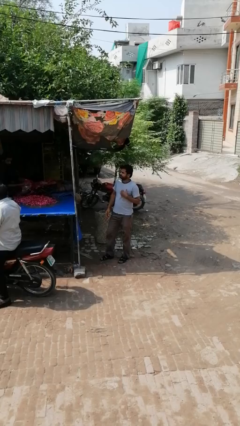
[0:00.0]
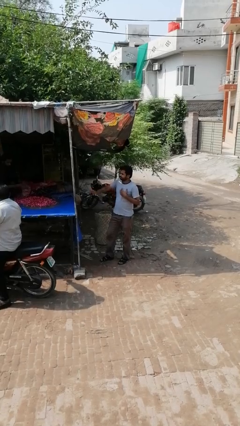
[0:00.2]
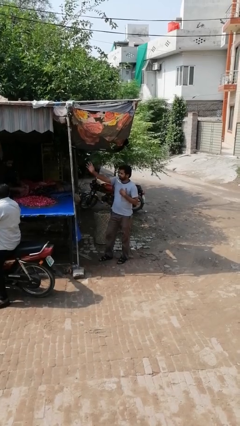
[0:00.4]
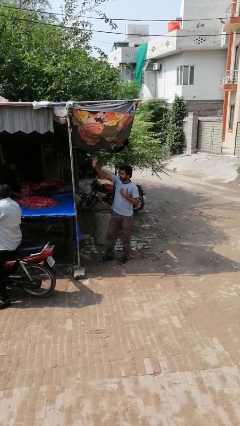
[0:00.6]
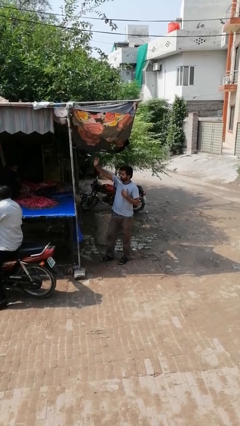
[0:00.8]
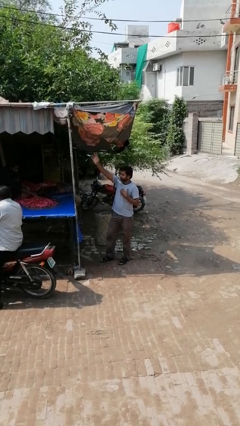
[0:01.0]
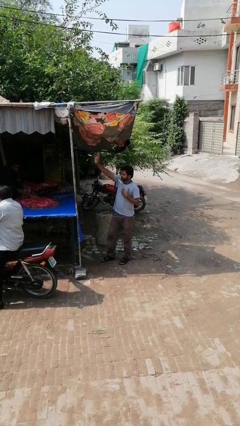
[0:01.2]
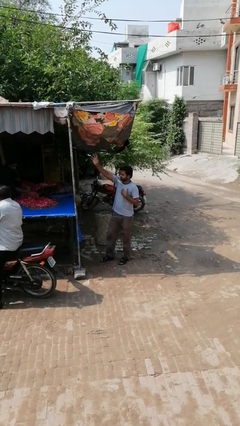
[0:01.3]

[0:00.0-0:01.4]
person waves at person

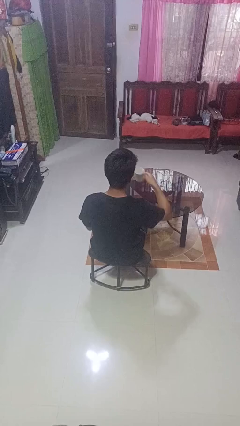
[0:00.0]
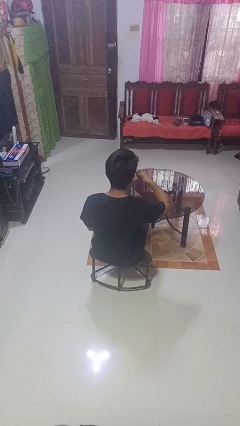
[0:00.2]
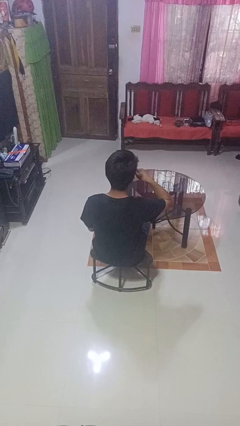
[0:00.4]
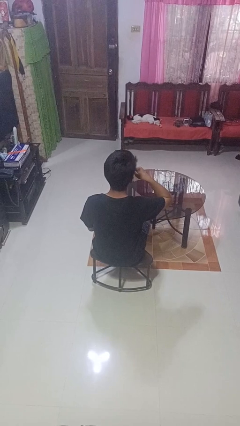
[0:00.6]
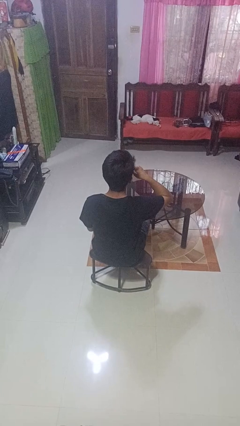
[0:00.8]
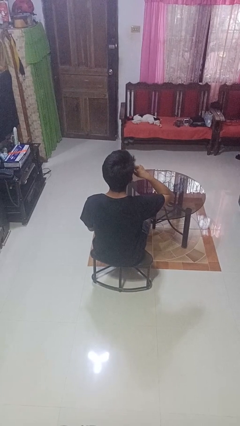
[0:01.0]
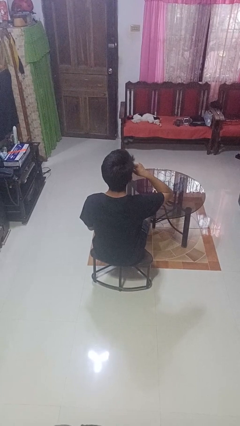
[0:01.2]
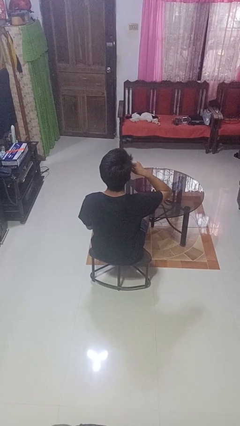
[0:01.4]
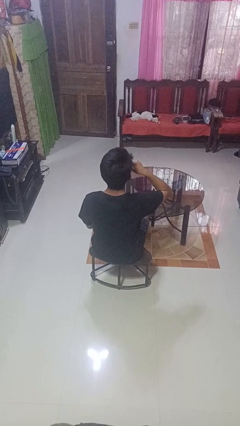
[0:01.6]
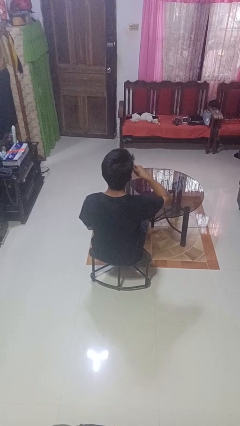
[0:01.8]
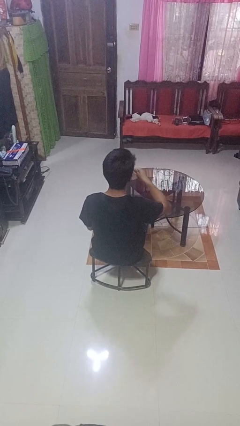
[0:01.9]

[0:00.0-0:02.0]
person drinks from mug

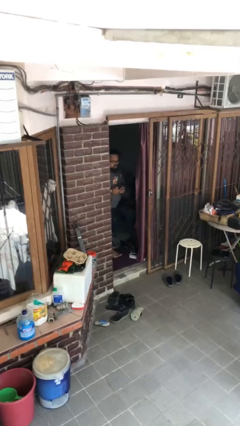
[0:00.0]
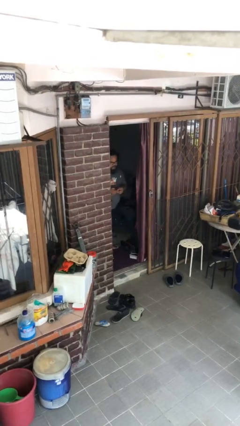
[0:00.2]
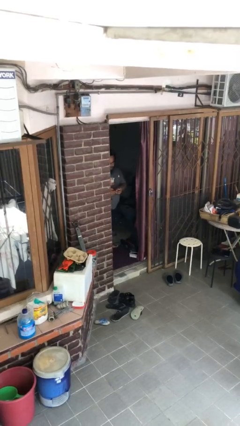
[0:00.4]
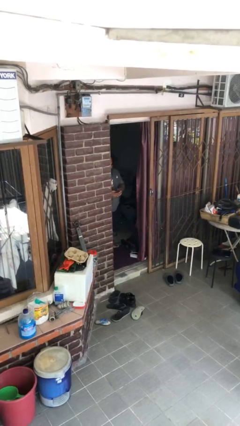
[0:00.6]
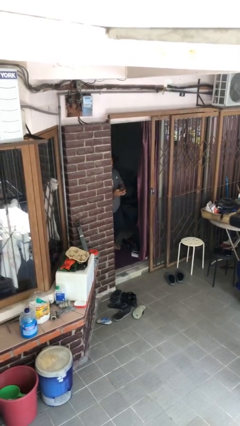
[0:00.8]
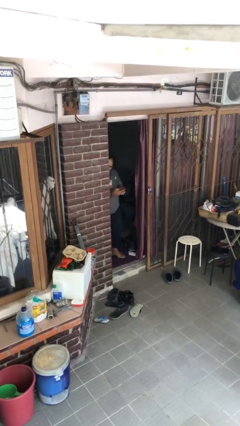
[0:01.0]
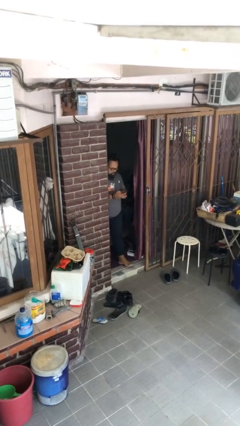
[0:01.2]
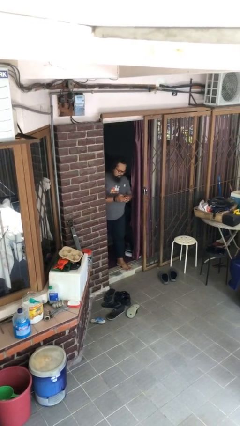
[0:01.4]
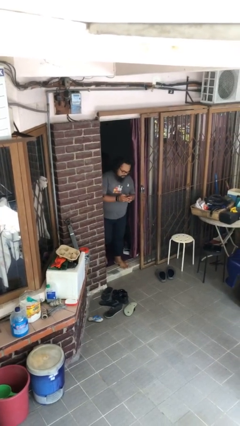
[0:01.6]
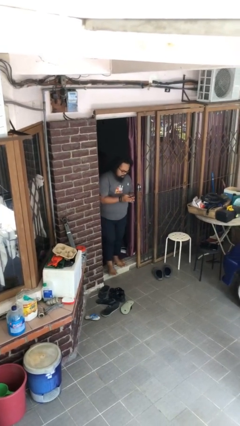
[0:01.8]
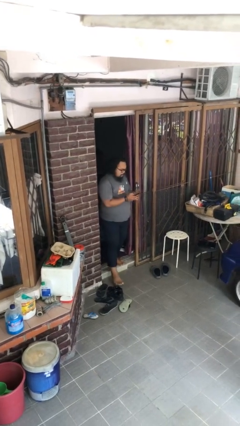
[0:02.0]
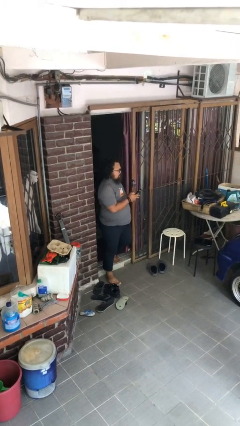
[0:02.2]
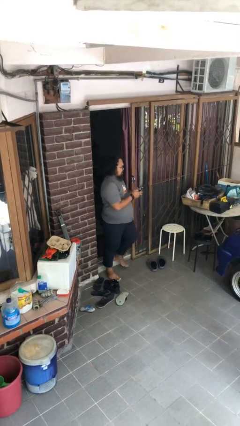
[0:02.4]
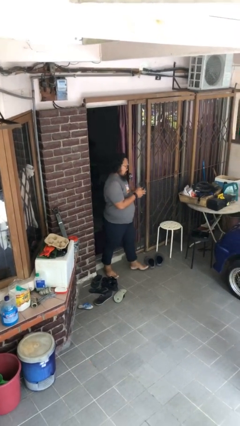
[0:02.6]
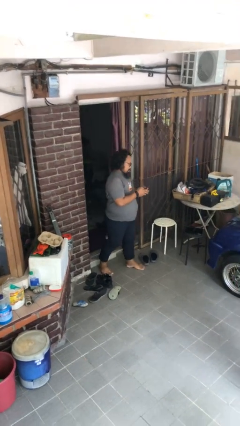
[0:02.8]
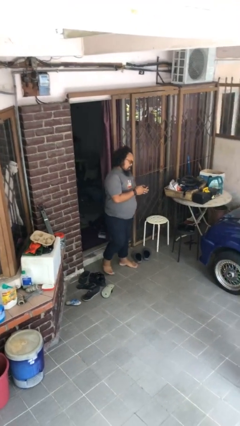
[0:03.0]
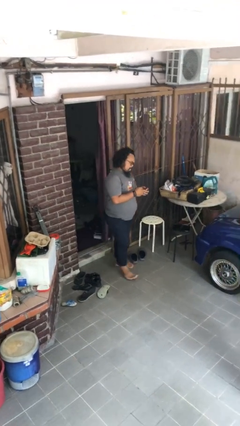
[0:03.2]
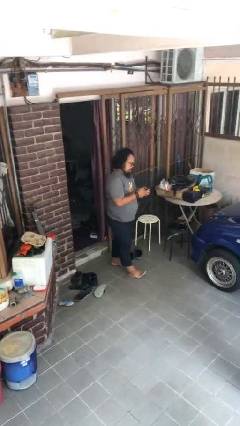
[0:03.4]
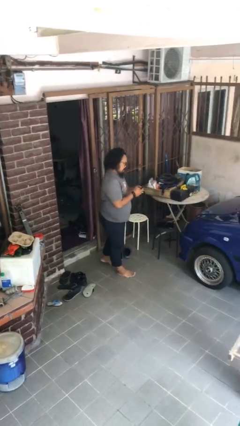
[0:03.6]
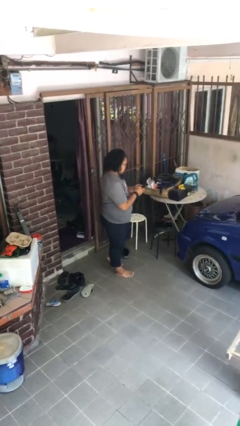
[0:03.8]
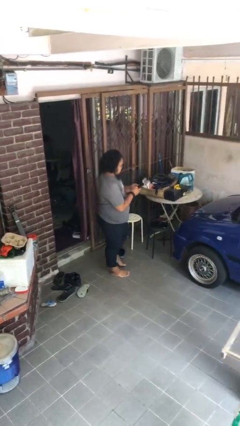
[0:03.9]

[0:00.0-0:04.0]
person enters scene through structure

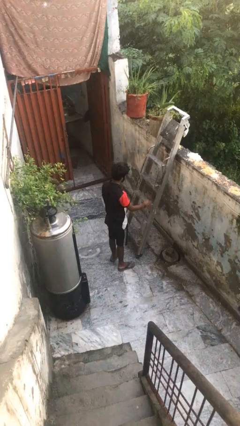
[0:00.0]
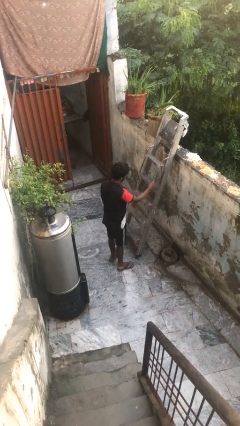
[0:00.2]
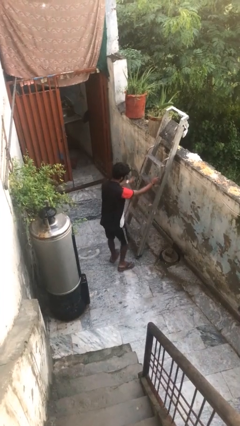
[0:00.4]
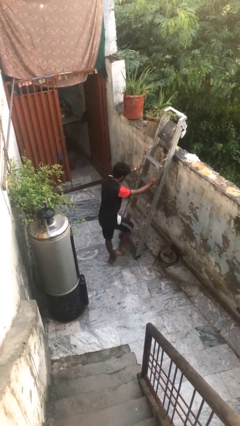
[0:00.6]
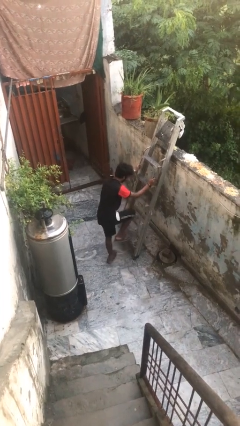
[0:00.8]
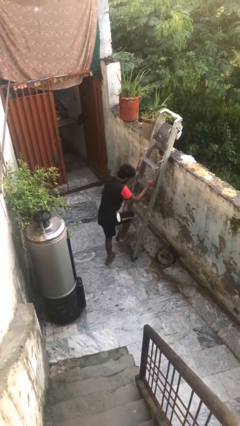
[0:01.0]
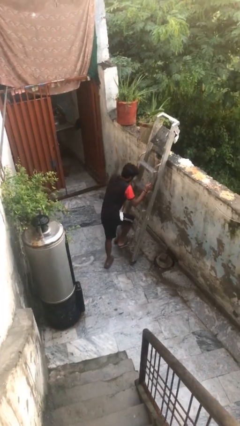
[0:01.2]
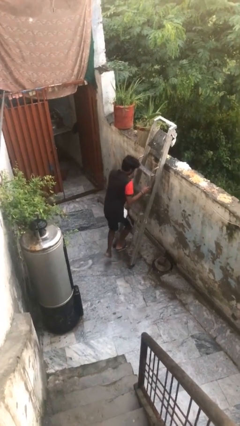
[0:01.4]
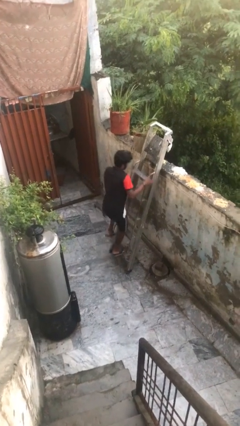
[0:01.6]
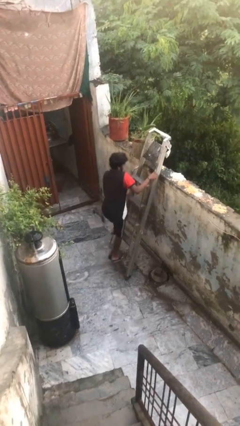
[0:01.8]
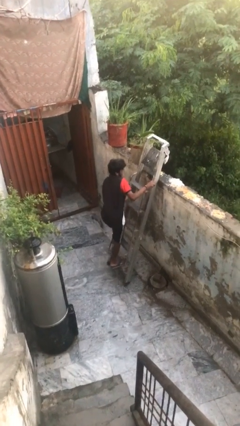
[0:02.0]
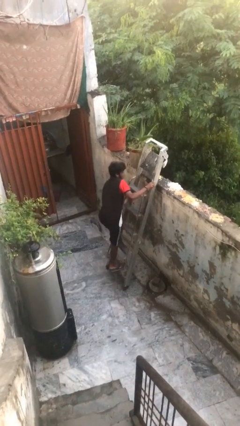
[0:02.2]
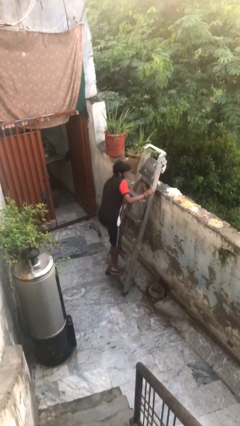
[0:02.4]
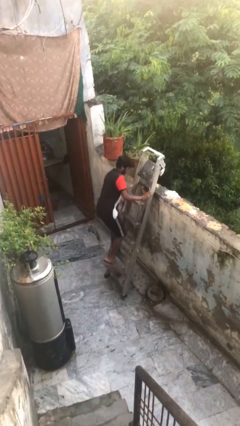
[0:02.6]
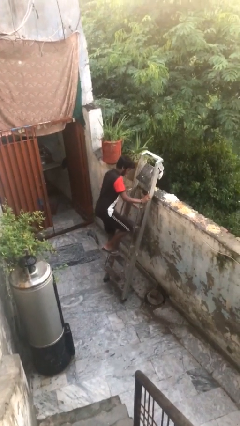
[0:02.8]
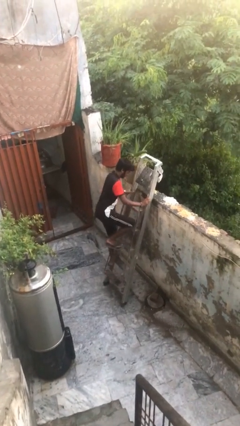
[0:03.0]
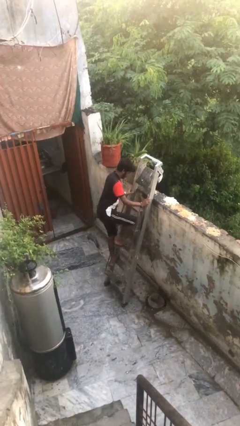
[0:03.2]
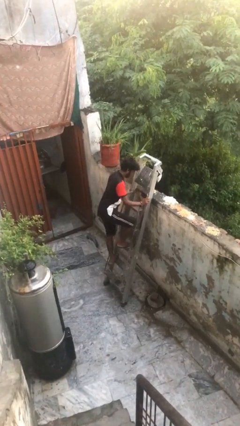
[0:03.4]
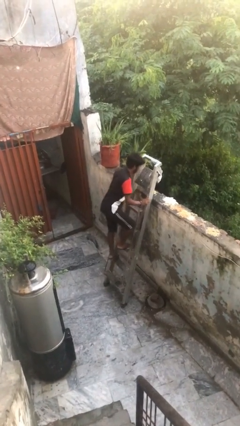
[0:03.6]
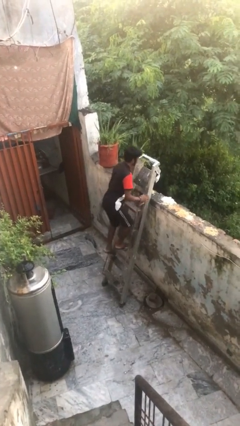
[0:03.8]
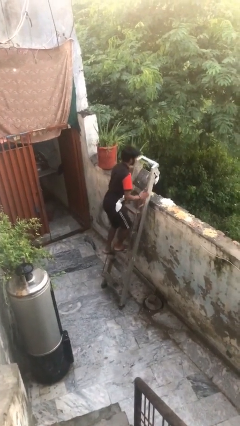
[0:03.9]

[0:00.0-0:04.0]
person climbs up ladder

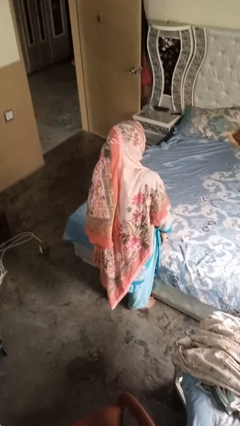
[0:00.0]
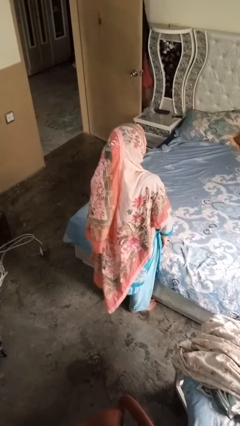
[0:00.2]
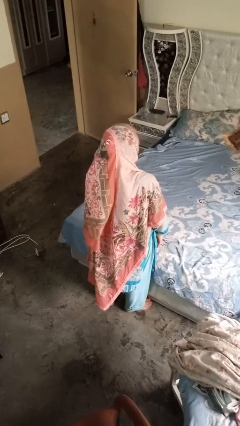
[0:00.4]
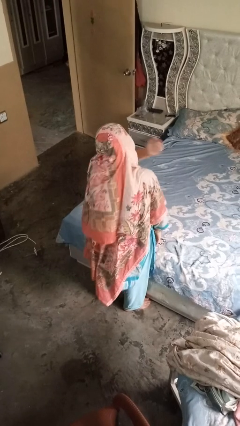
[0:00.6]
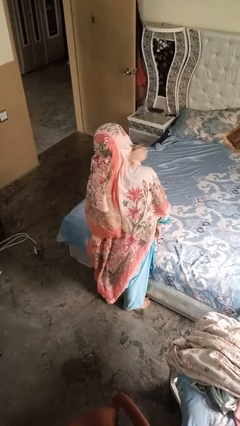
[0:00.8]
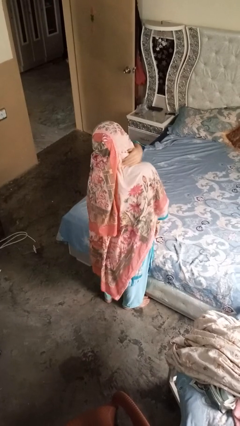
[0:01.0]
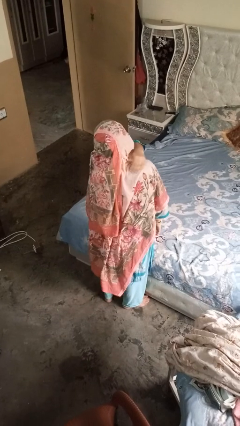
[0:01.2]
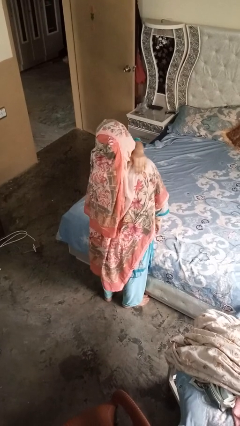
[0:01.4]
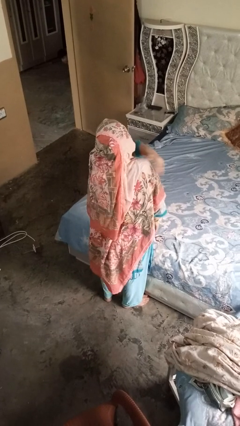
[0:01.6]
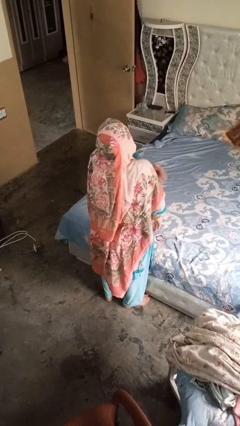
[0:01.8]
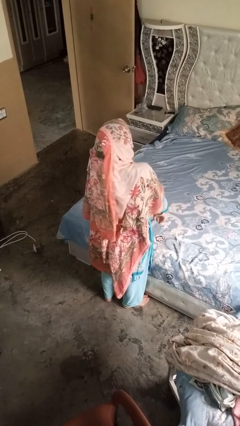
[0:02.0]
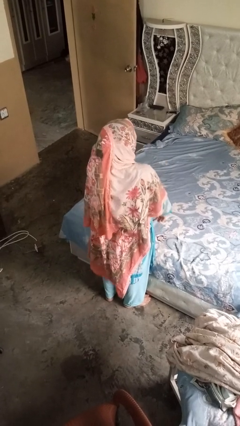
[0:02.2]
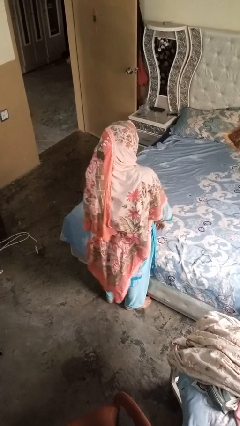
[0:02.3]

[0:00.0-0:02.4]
person swats bug

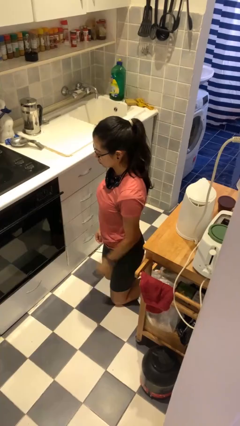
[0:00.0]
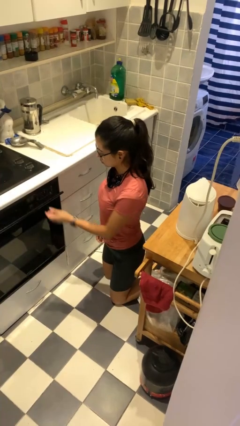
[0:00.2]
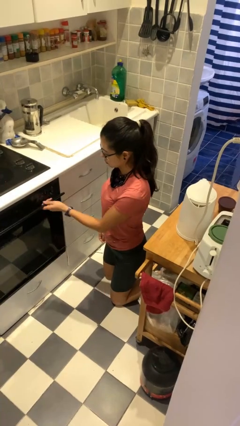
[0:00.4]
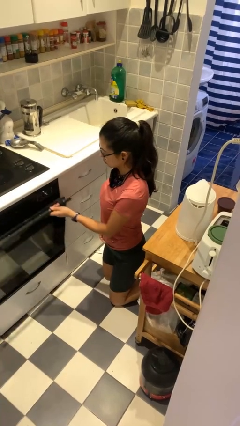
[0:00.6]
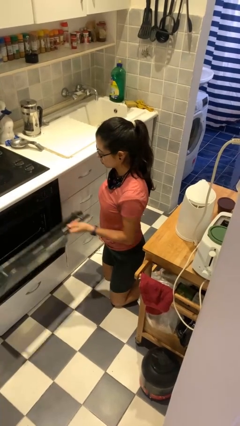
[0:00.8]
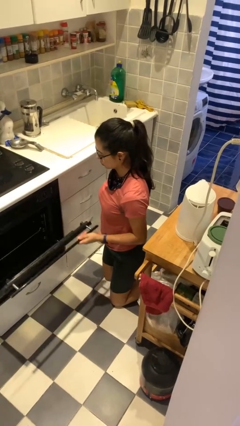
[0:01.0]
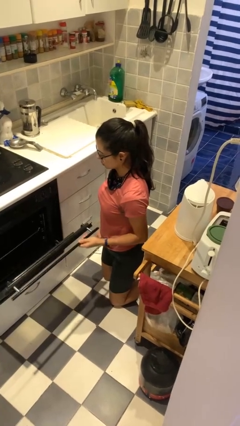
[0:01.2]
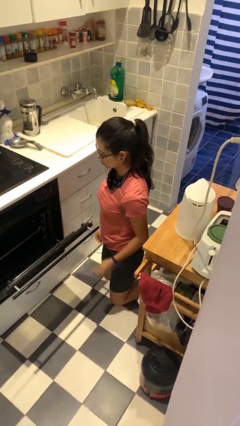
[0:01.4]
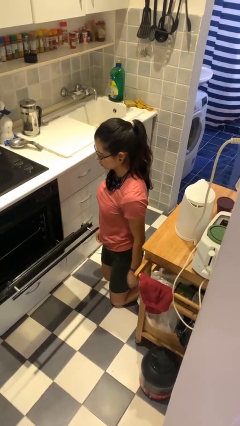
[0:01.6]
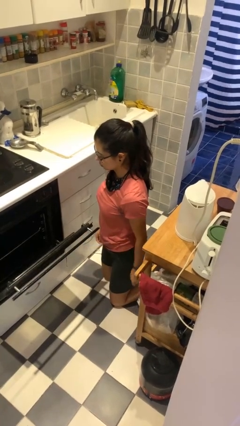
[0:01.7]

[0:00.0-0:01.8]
person opens oven door

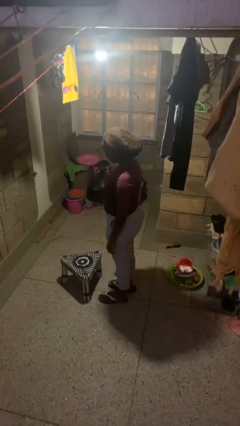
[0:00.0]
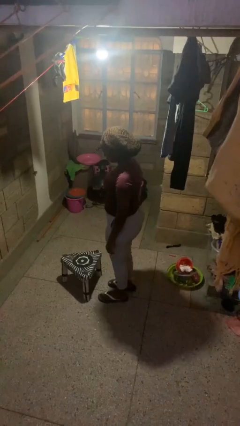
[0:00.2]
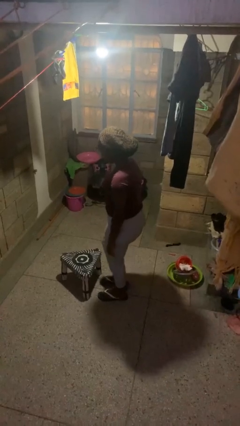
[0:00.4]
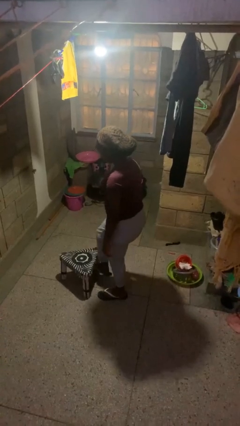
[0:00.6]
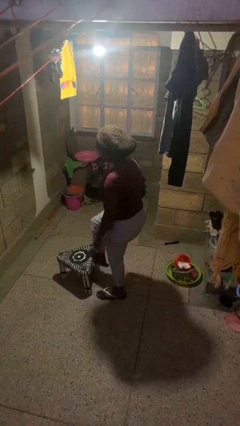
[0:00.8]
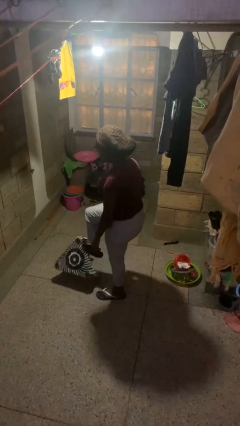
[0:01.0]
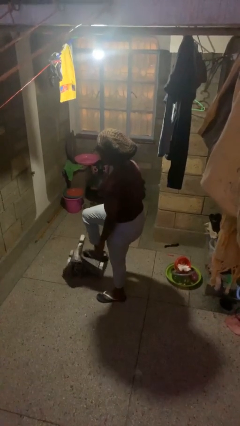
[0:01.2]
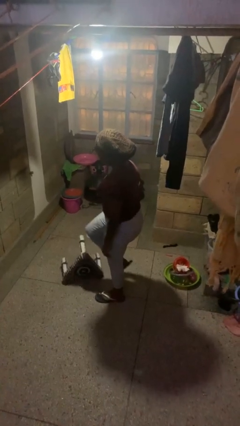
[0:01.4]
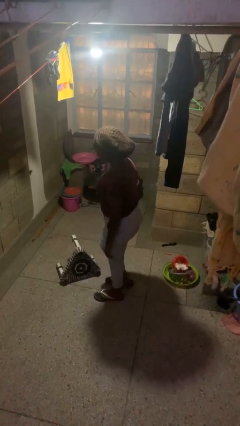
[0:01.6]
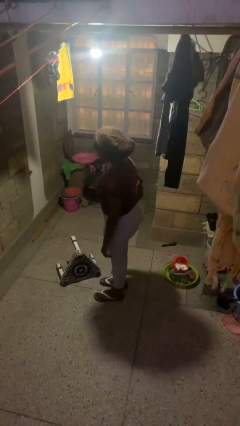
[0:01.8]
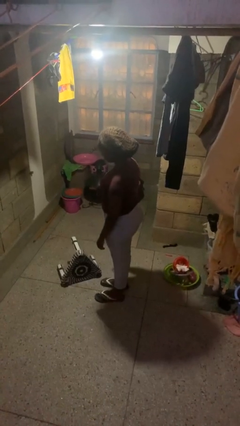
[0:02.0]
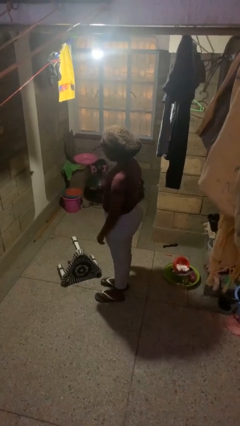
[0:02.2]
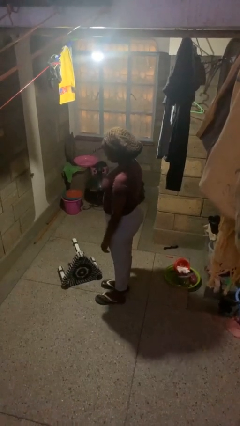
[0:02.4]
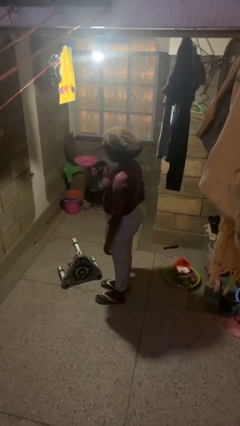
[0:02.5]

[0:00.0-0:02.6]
person knocks over furniture
